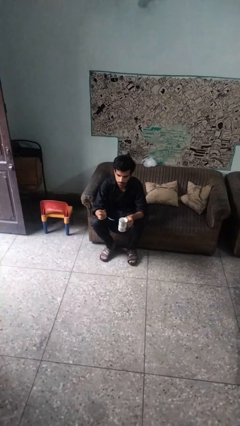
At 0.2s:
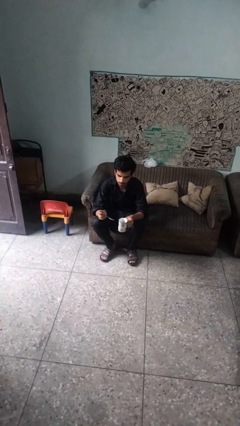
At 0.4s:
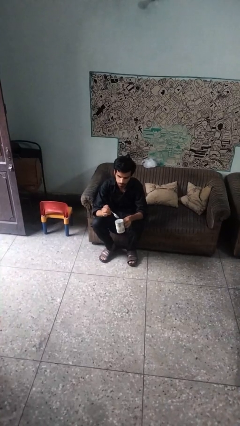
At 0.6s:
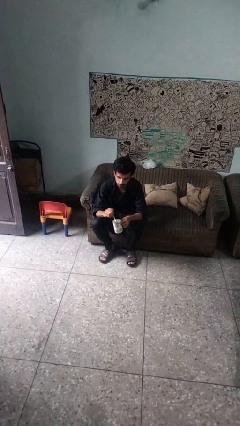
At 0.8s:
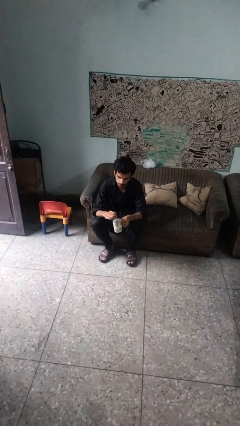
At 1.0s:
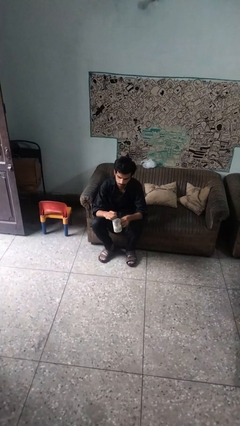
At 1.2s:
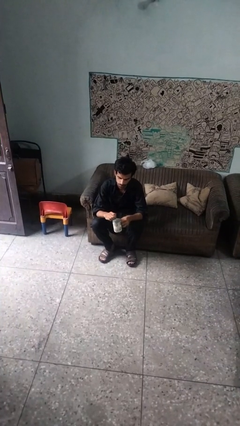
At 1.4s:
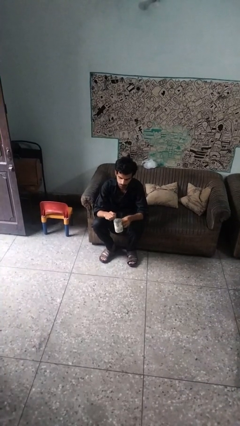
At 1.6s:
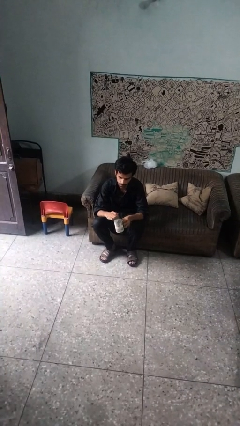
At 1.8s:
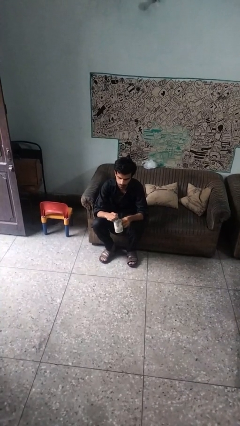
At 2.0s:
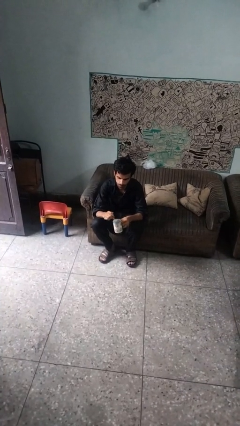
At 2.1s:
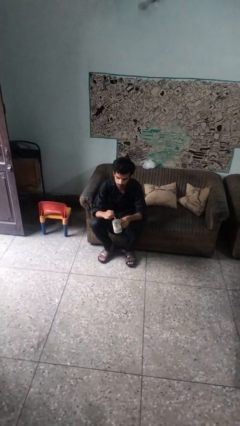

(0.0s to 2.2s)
person stirs mug

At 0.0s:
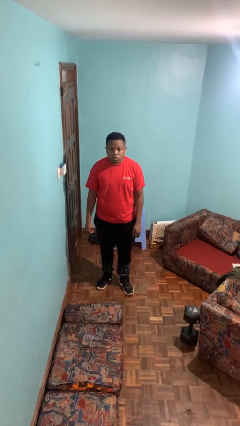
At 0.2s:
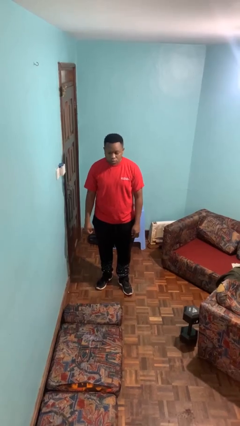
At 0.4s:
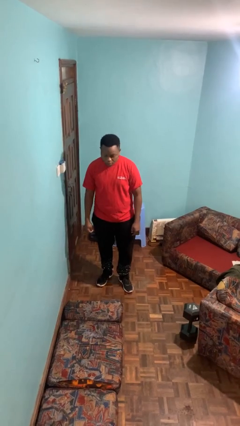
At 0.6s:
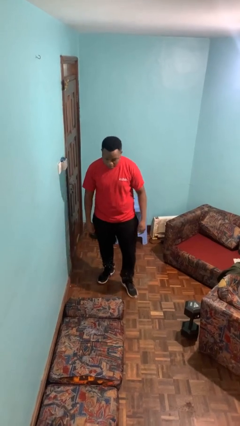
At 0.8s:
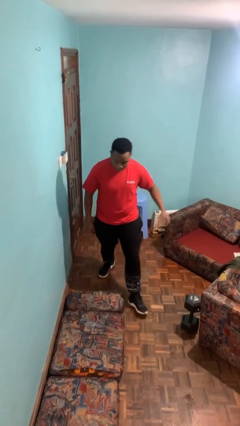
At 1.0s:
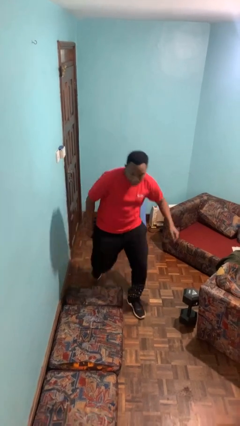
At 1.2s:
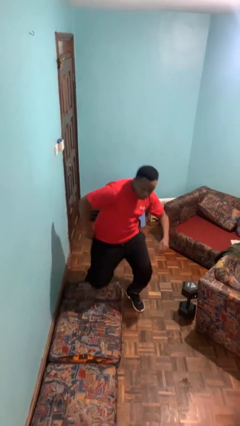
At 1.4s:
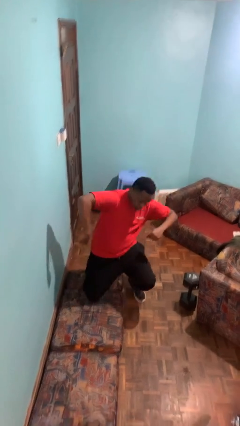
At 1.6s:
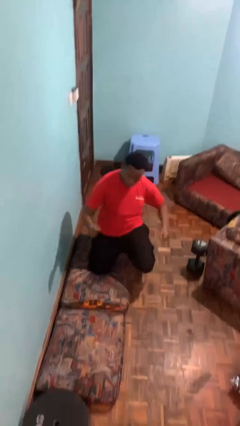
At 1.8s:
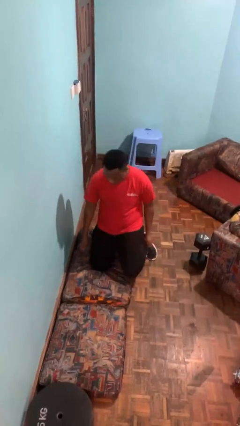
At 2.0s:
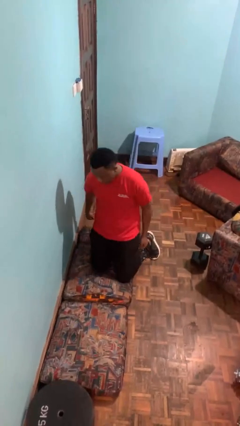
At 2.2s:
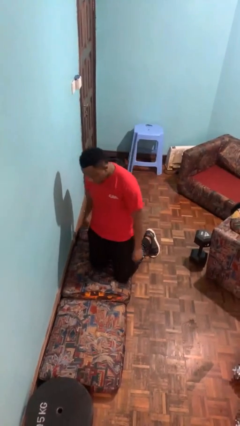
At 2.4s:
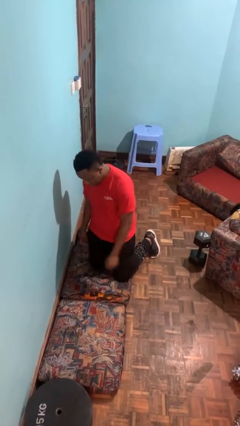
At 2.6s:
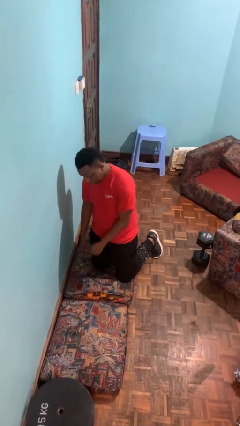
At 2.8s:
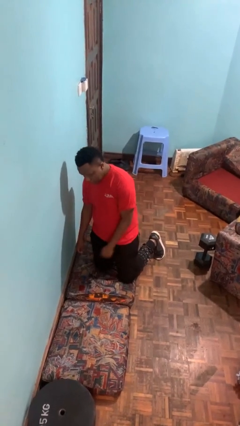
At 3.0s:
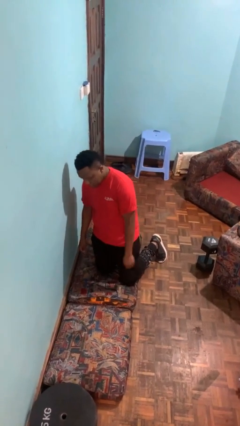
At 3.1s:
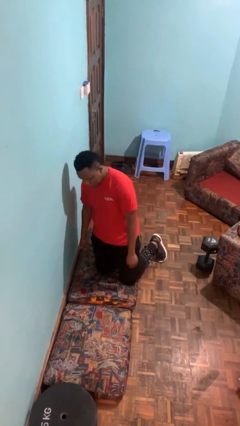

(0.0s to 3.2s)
person trips on object on floor

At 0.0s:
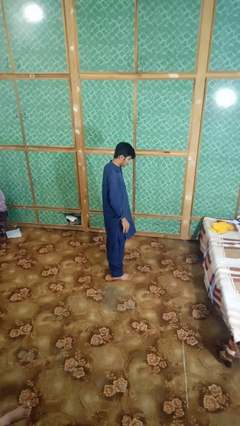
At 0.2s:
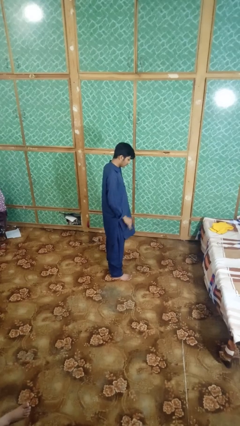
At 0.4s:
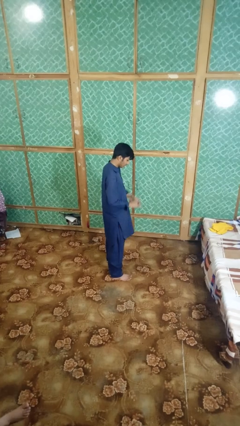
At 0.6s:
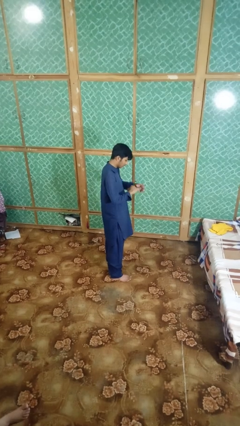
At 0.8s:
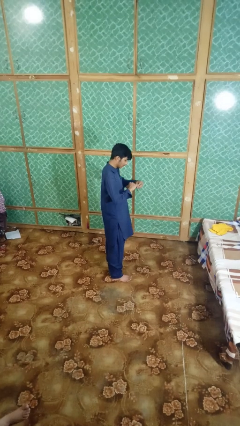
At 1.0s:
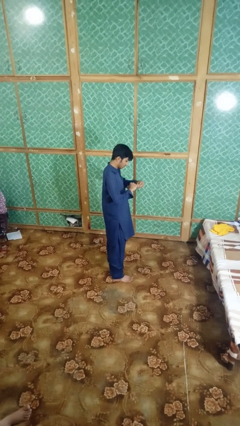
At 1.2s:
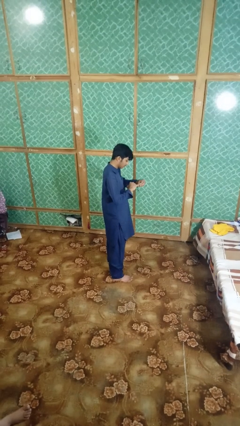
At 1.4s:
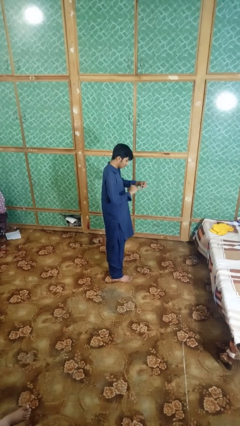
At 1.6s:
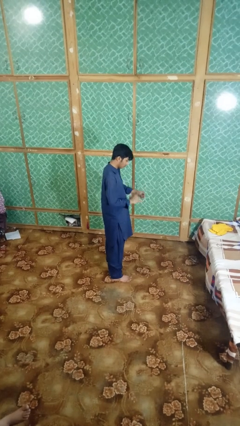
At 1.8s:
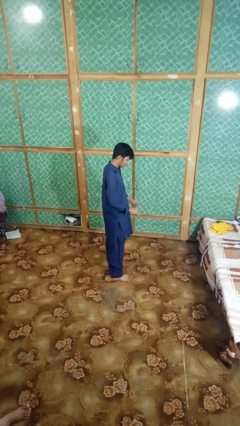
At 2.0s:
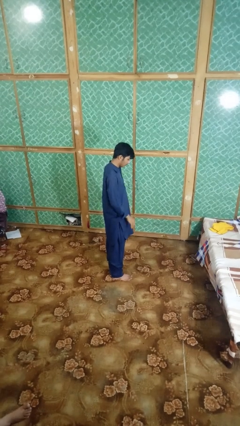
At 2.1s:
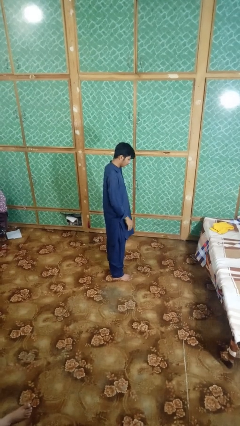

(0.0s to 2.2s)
person takes off ring

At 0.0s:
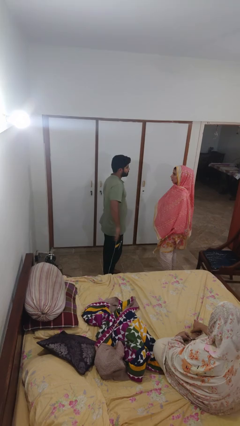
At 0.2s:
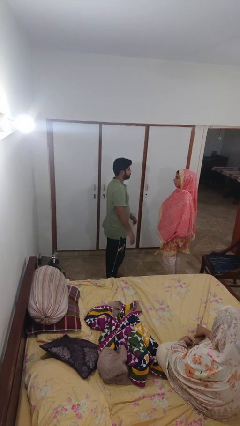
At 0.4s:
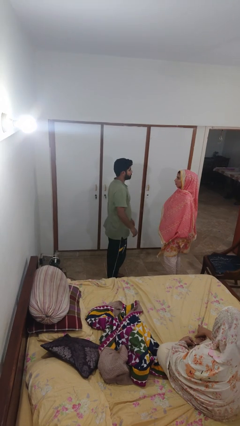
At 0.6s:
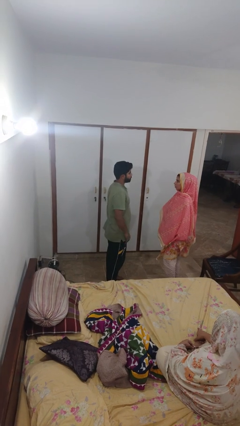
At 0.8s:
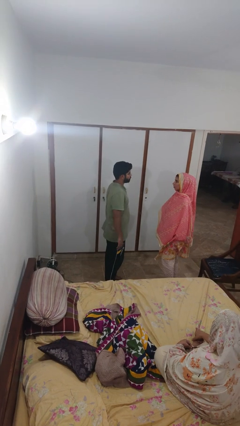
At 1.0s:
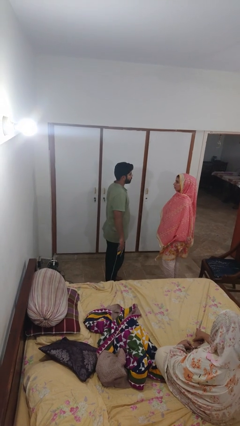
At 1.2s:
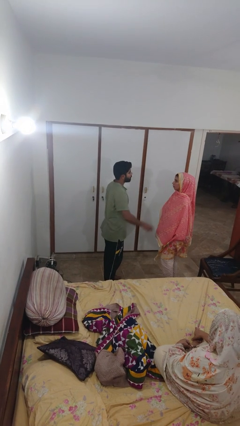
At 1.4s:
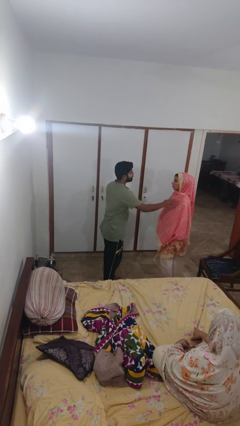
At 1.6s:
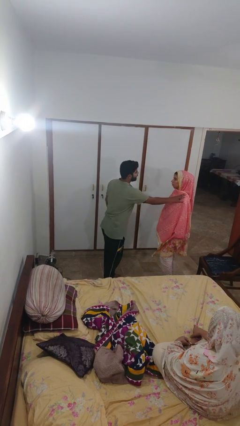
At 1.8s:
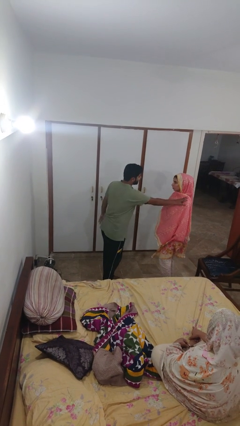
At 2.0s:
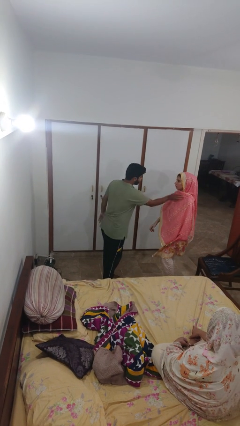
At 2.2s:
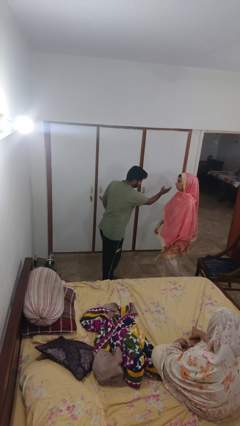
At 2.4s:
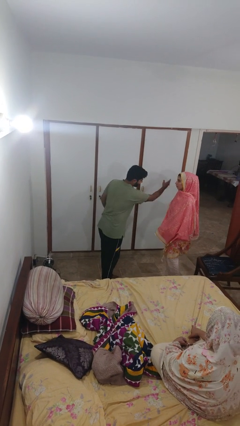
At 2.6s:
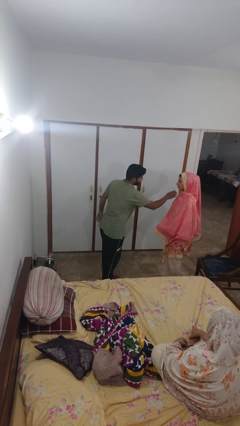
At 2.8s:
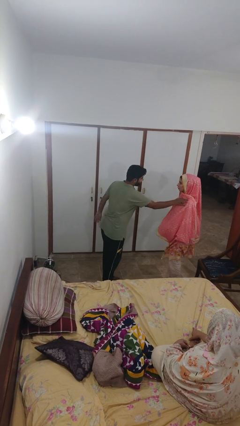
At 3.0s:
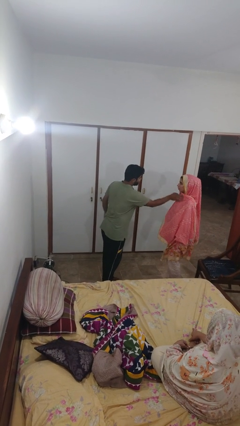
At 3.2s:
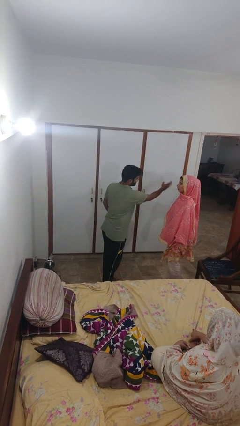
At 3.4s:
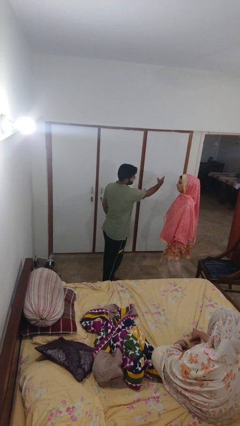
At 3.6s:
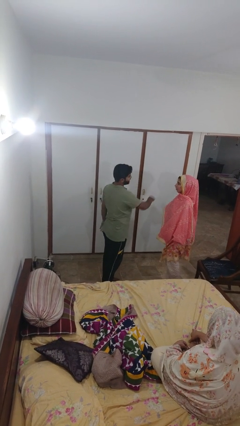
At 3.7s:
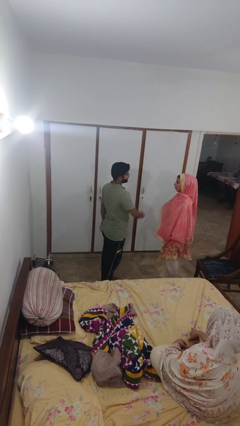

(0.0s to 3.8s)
person shoves person

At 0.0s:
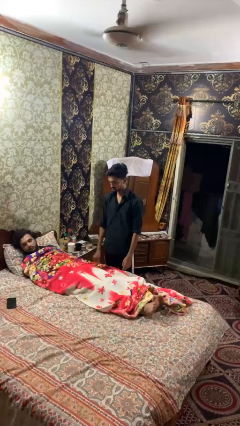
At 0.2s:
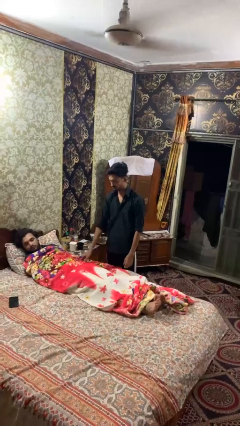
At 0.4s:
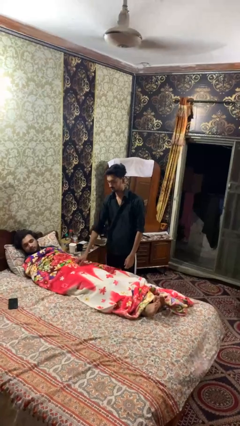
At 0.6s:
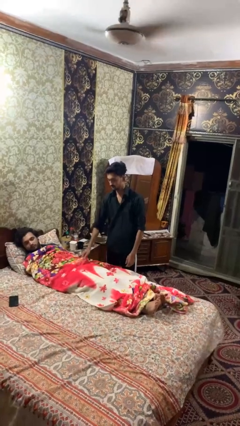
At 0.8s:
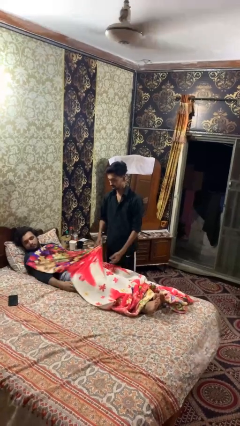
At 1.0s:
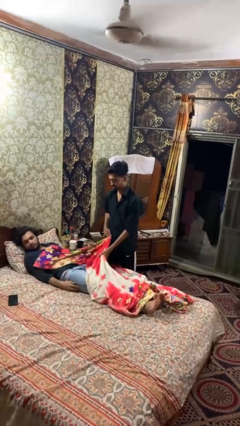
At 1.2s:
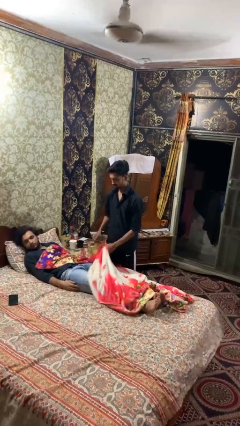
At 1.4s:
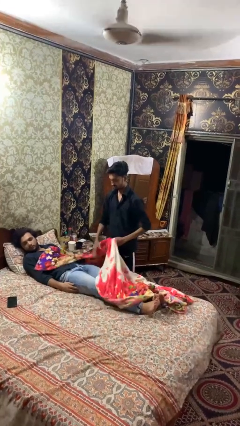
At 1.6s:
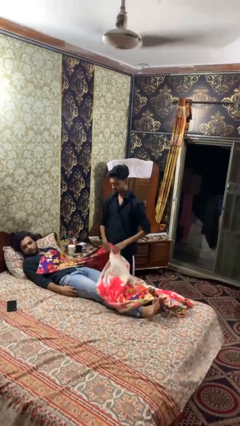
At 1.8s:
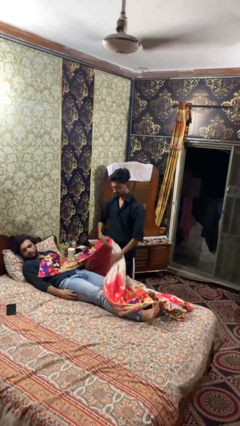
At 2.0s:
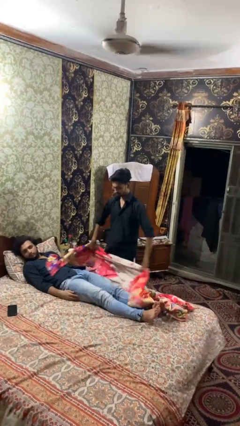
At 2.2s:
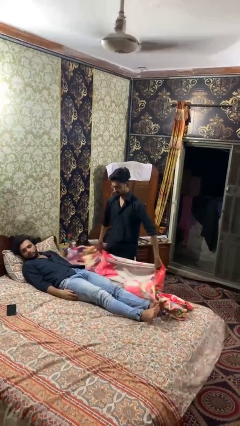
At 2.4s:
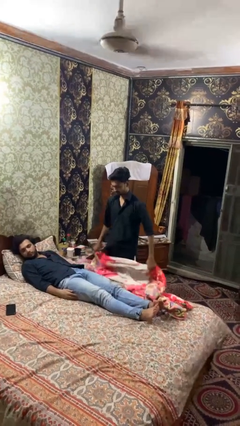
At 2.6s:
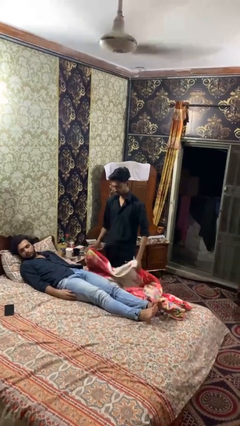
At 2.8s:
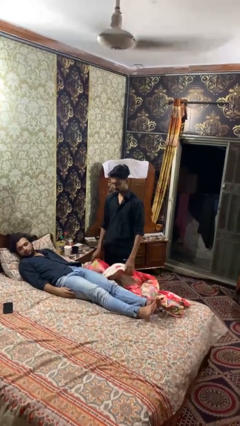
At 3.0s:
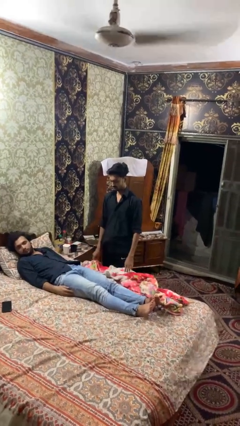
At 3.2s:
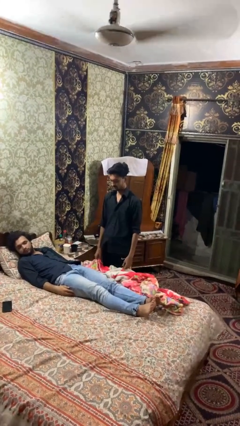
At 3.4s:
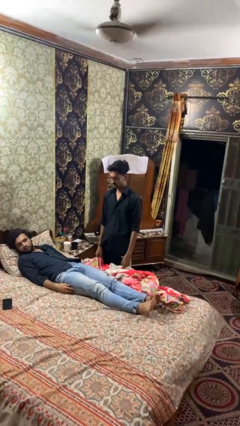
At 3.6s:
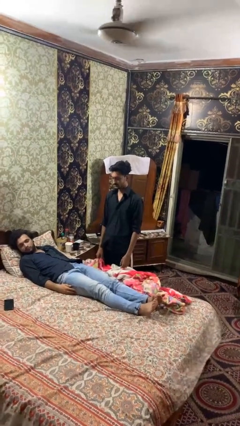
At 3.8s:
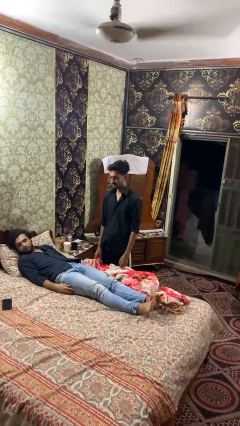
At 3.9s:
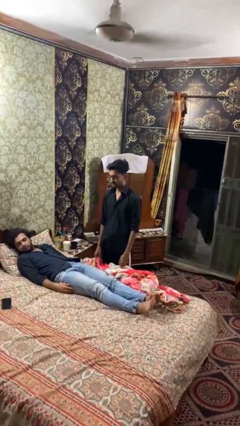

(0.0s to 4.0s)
person uncovers friend with blanket

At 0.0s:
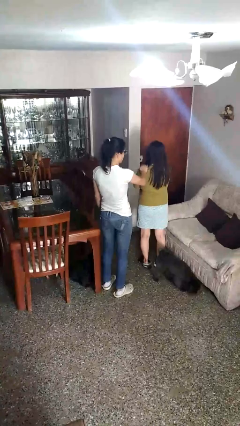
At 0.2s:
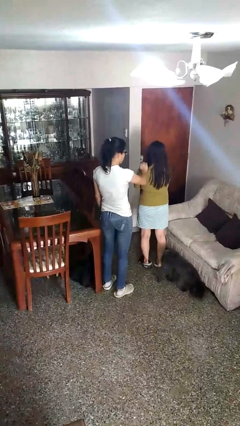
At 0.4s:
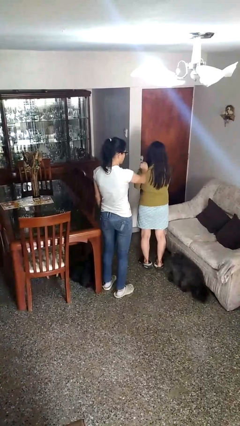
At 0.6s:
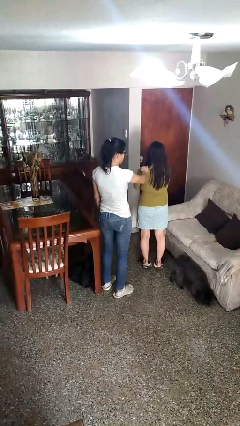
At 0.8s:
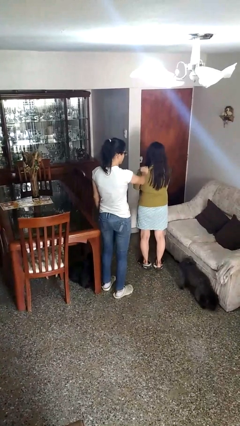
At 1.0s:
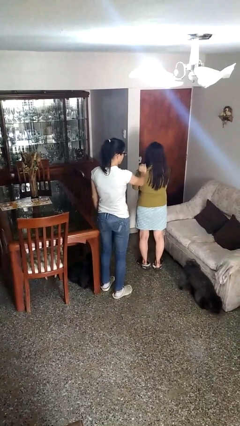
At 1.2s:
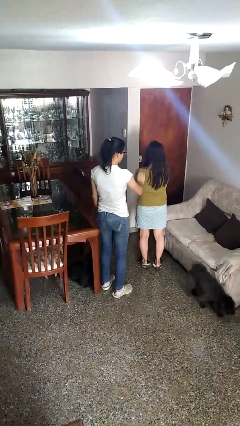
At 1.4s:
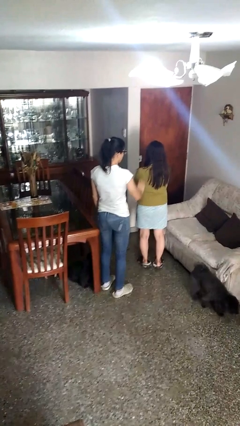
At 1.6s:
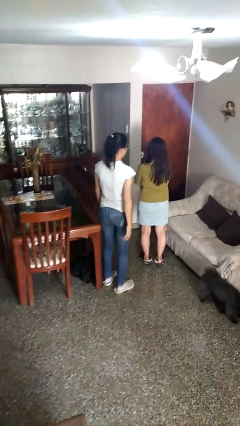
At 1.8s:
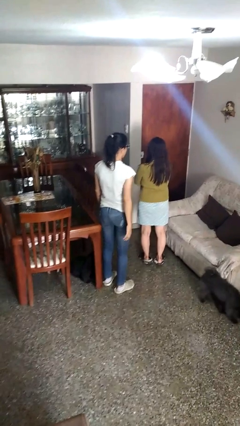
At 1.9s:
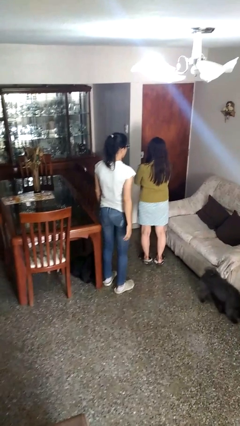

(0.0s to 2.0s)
person touches back of person
